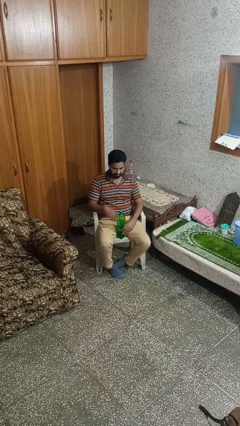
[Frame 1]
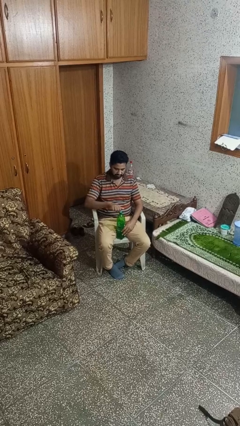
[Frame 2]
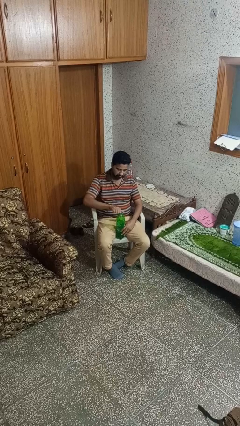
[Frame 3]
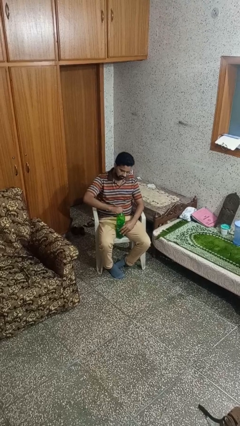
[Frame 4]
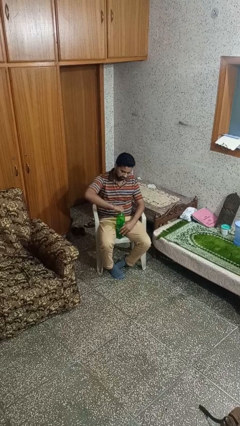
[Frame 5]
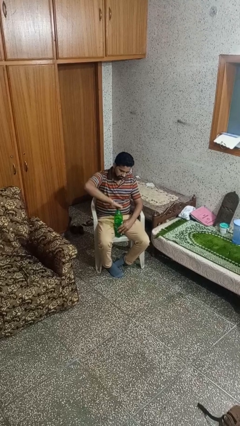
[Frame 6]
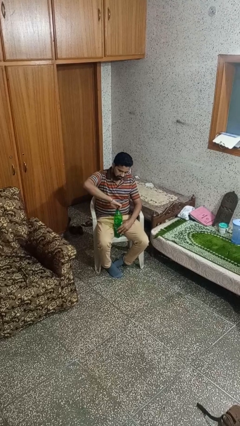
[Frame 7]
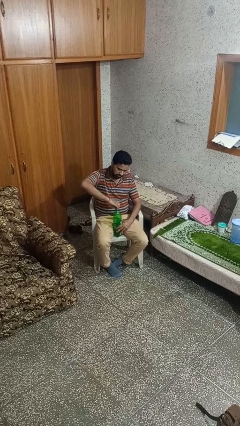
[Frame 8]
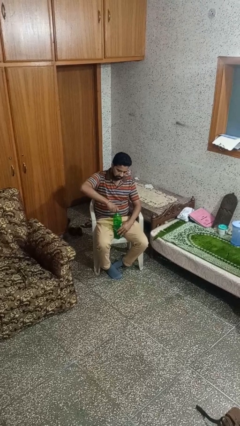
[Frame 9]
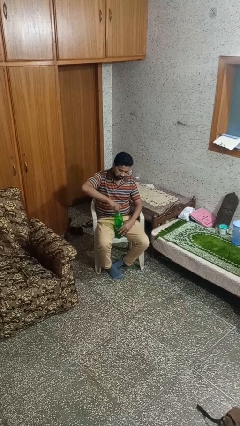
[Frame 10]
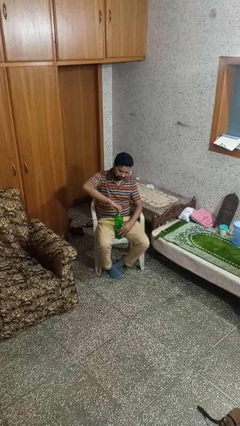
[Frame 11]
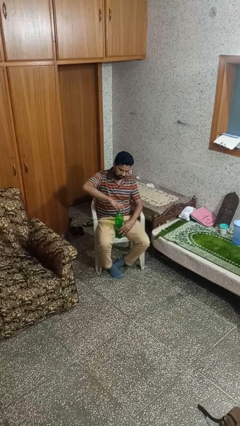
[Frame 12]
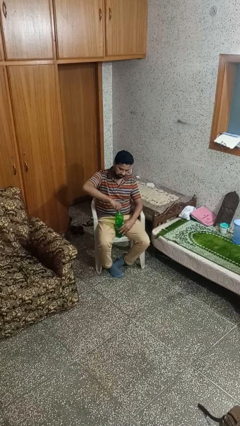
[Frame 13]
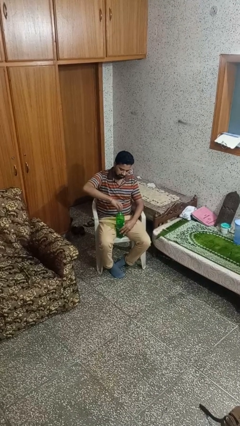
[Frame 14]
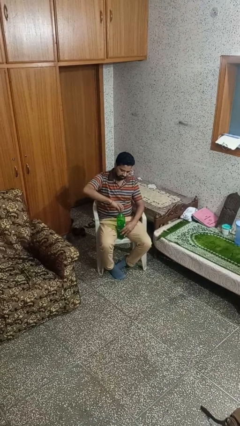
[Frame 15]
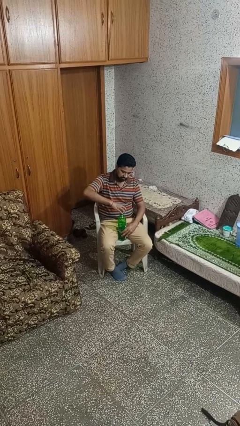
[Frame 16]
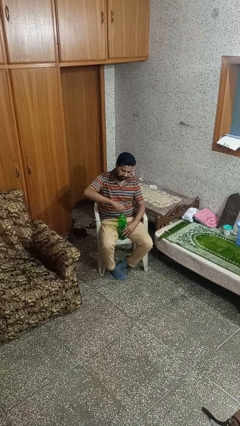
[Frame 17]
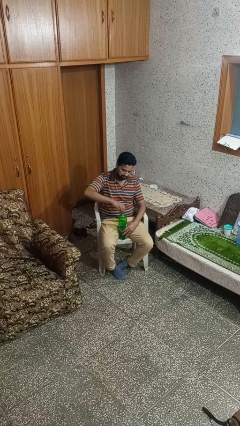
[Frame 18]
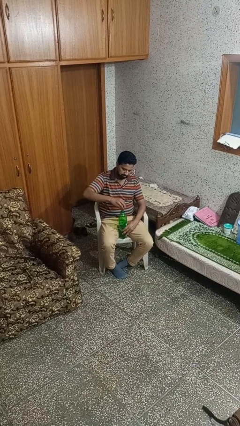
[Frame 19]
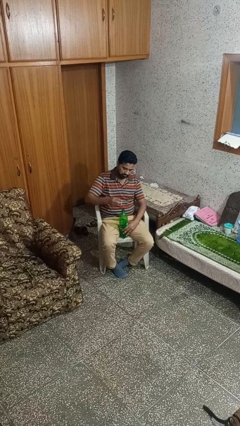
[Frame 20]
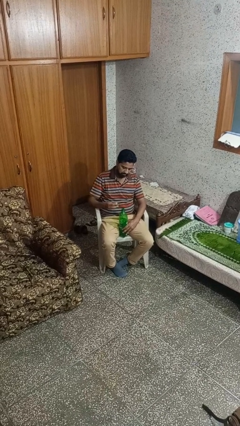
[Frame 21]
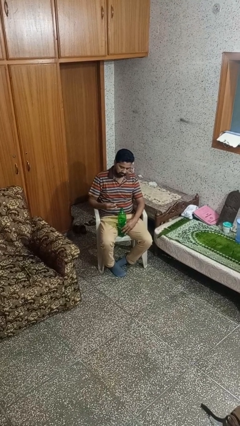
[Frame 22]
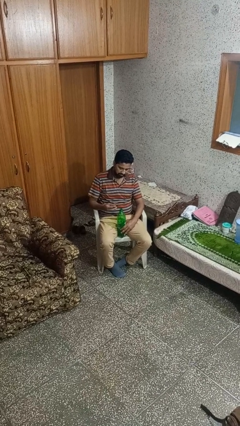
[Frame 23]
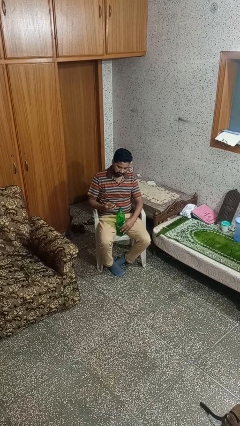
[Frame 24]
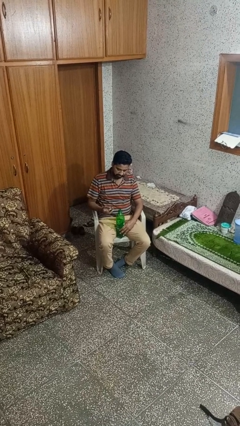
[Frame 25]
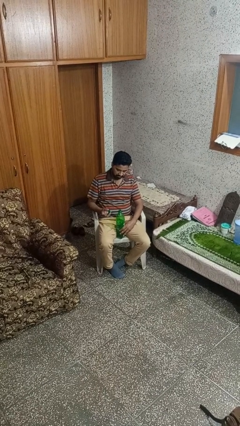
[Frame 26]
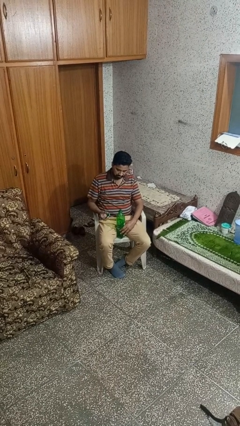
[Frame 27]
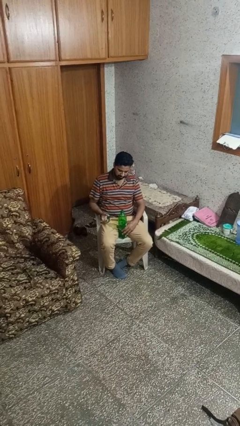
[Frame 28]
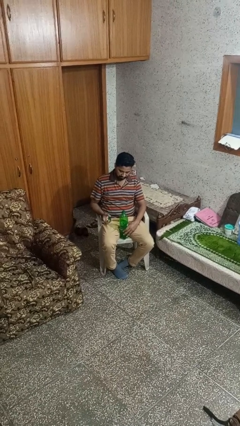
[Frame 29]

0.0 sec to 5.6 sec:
person unscrews lid from bottle

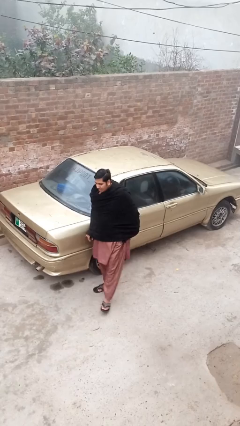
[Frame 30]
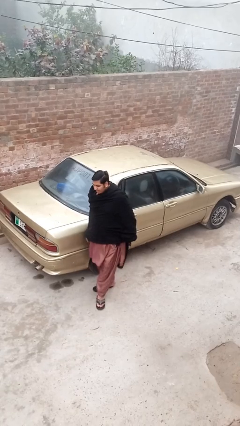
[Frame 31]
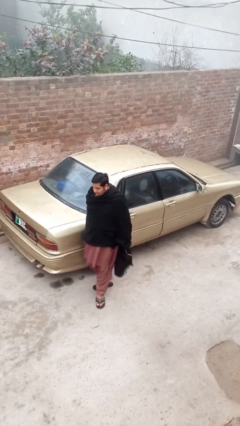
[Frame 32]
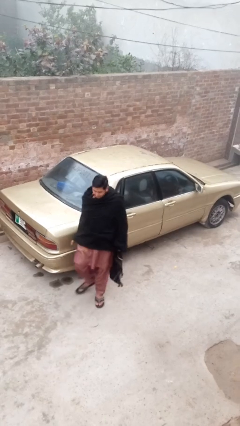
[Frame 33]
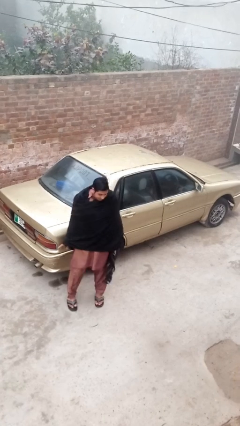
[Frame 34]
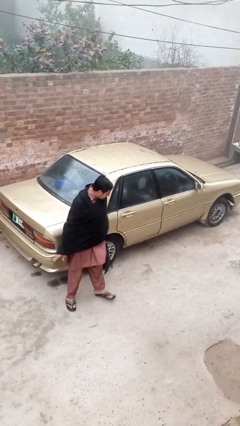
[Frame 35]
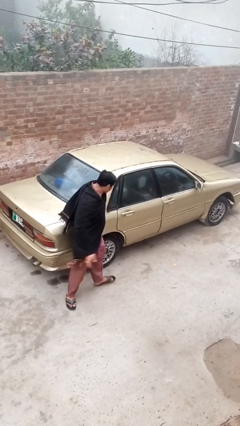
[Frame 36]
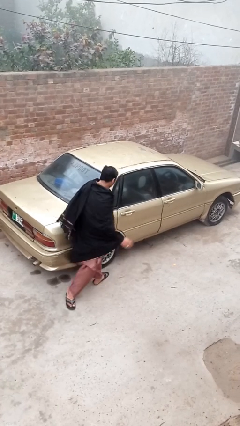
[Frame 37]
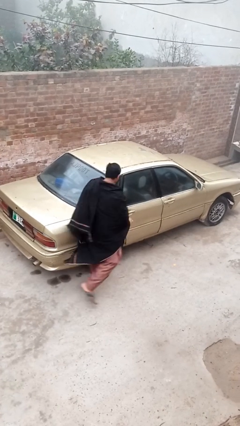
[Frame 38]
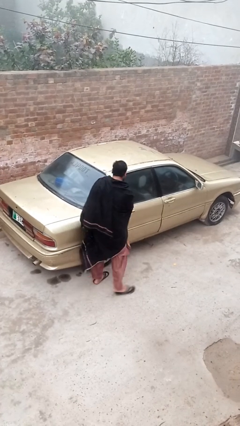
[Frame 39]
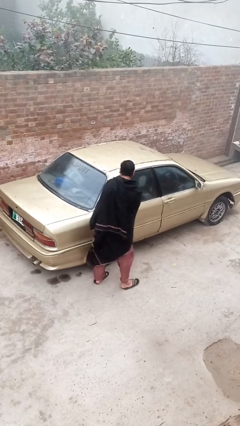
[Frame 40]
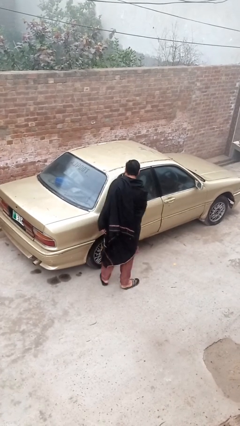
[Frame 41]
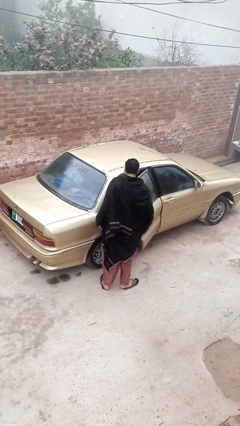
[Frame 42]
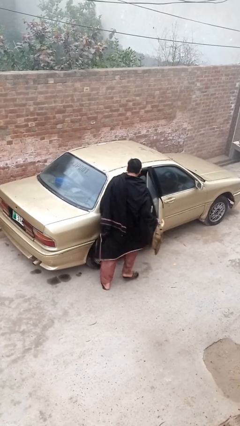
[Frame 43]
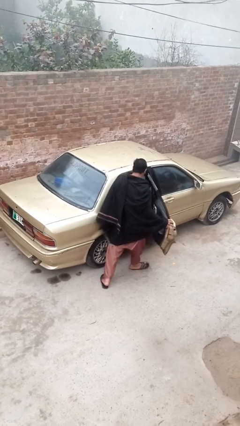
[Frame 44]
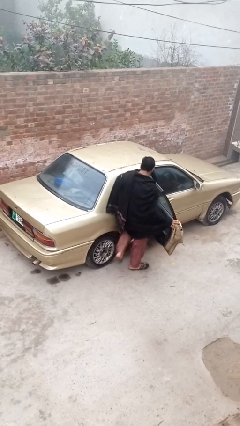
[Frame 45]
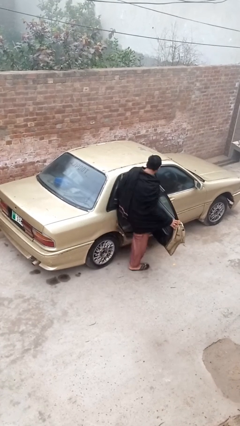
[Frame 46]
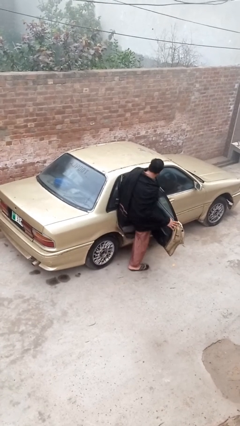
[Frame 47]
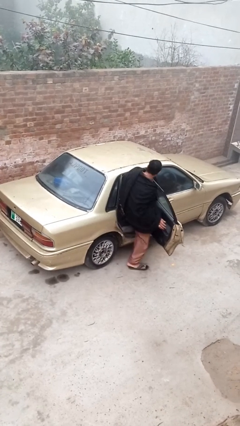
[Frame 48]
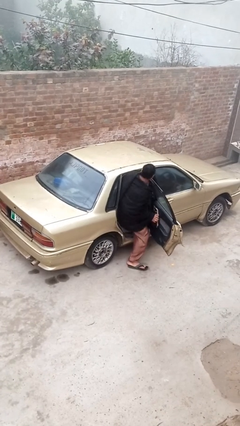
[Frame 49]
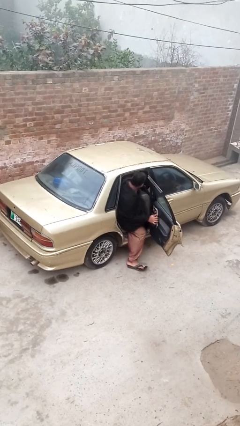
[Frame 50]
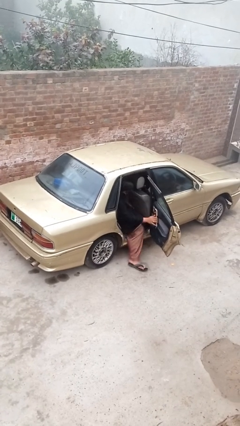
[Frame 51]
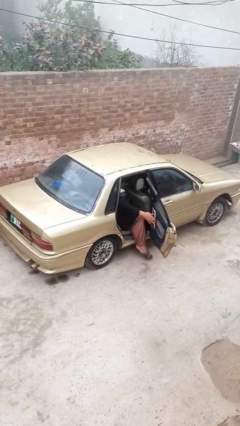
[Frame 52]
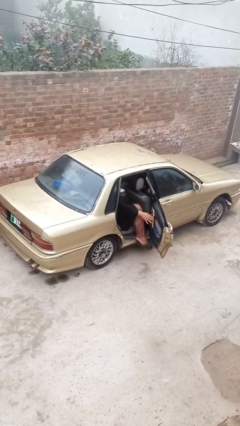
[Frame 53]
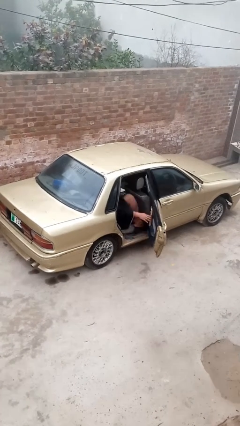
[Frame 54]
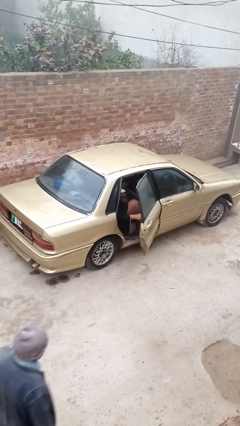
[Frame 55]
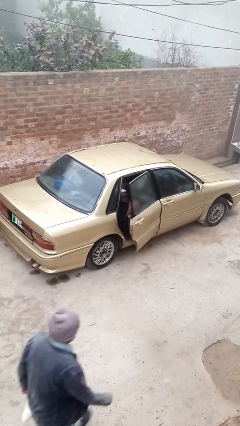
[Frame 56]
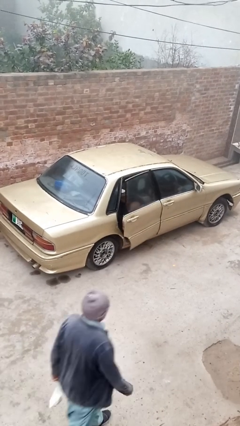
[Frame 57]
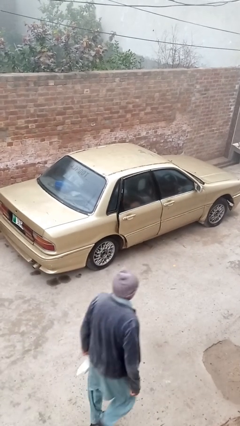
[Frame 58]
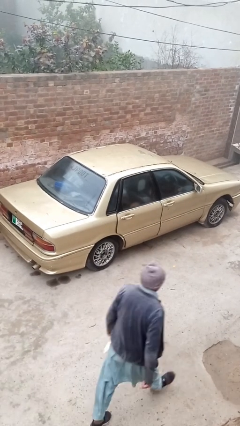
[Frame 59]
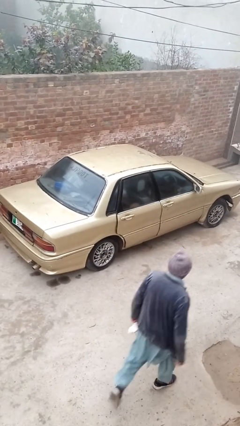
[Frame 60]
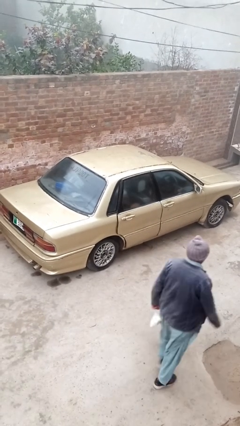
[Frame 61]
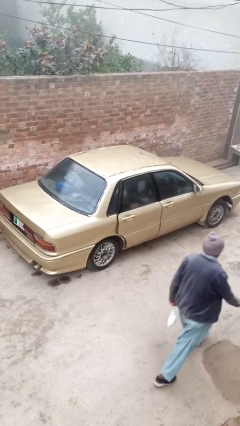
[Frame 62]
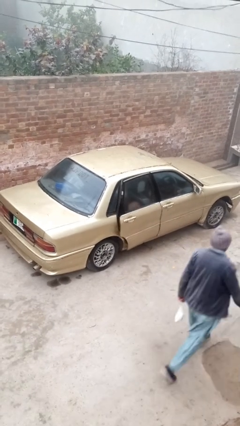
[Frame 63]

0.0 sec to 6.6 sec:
car picks up person

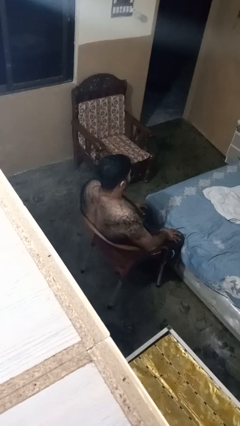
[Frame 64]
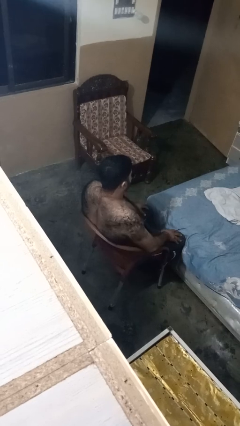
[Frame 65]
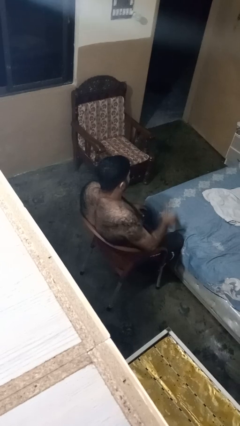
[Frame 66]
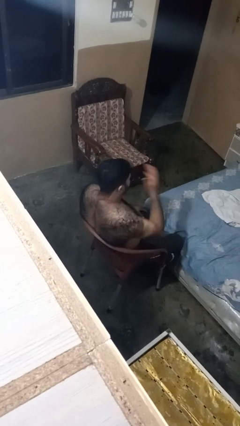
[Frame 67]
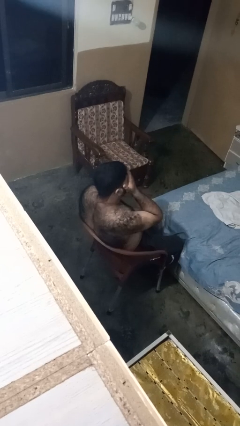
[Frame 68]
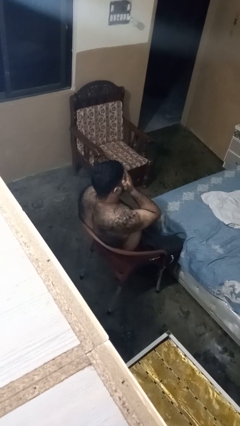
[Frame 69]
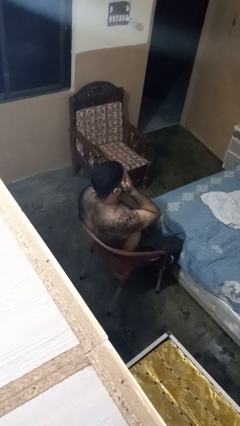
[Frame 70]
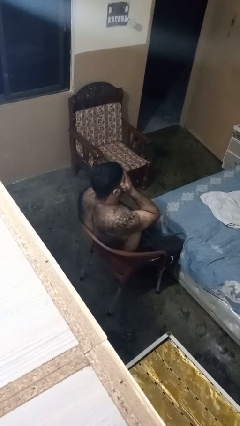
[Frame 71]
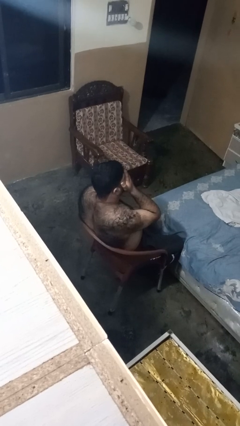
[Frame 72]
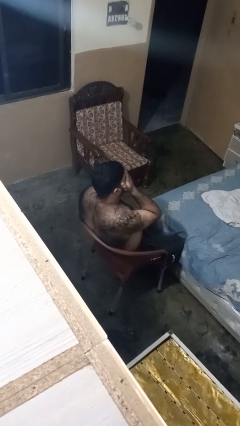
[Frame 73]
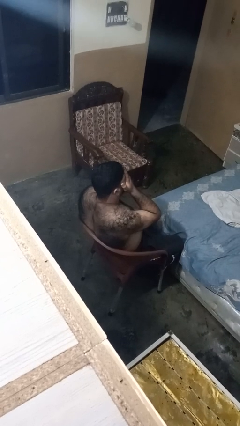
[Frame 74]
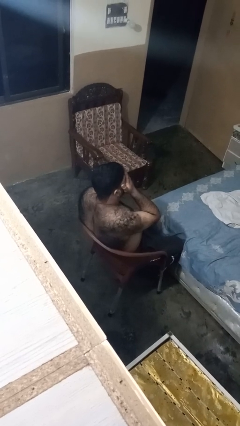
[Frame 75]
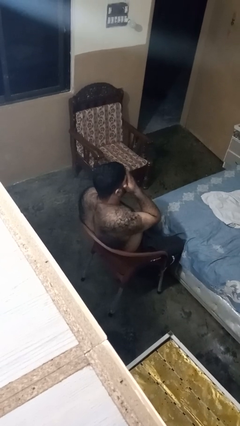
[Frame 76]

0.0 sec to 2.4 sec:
person covers face with hands

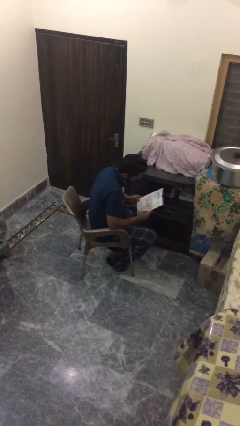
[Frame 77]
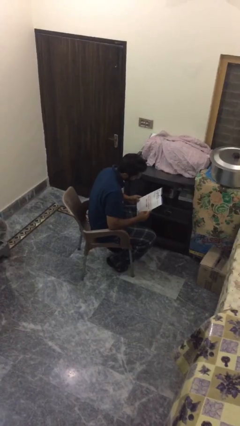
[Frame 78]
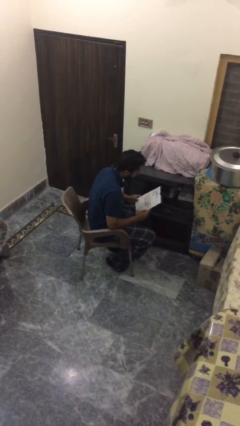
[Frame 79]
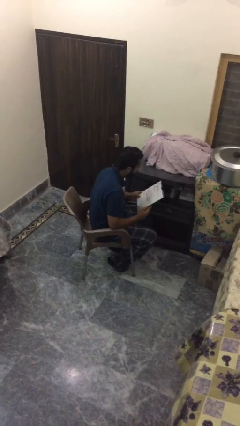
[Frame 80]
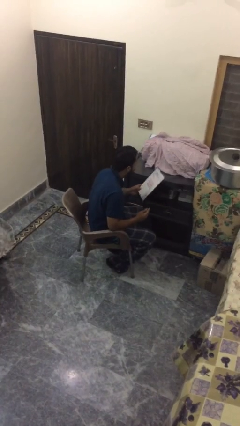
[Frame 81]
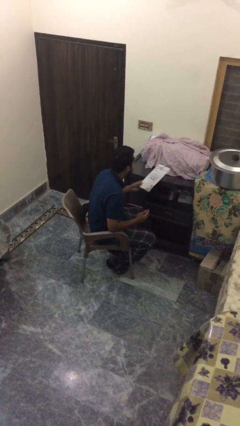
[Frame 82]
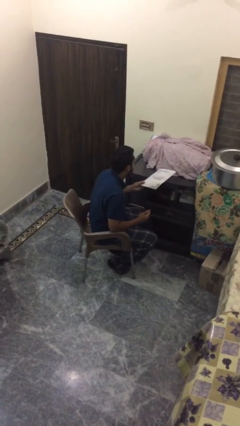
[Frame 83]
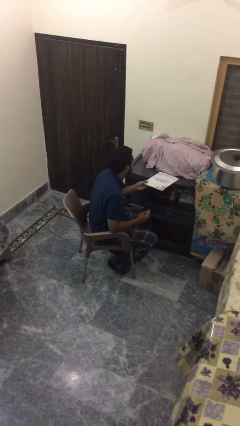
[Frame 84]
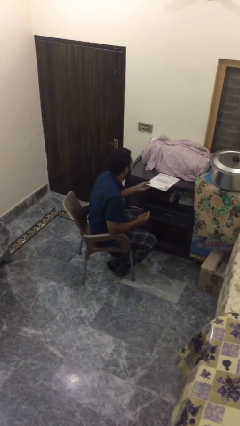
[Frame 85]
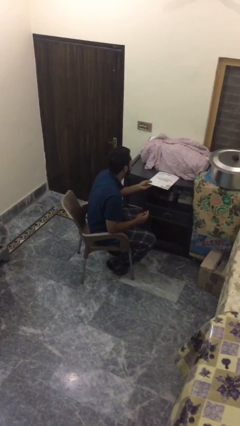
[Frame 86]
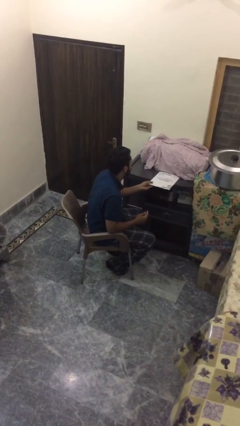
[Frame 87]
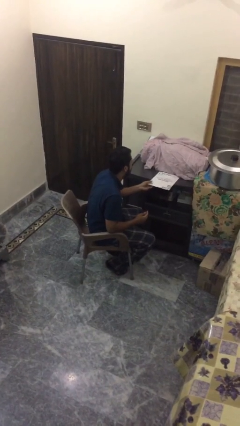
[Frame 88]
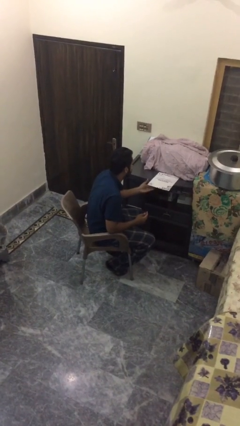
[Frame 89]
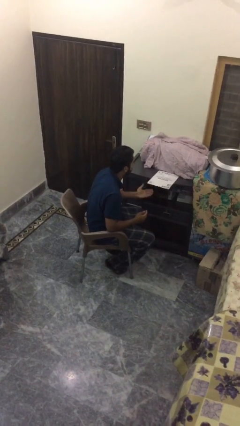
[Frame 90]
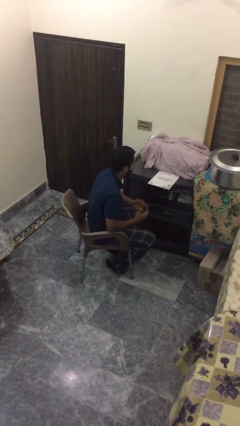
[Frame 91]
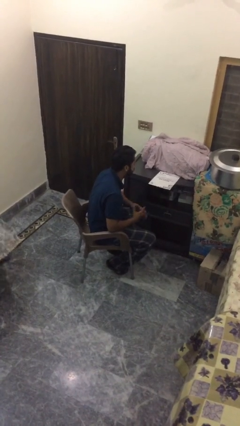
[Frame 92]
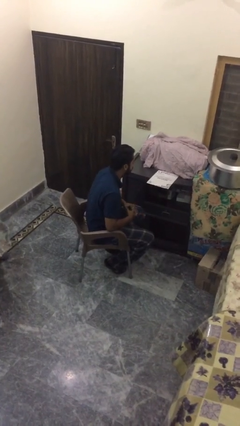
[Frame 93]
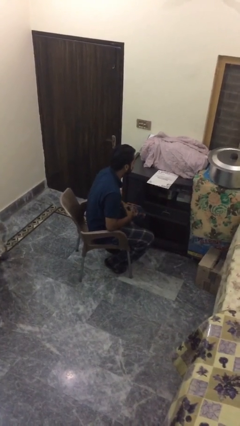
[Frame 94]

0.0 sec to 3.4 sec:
person puts down object on table
